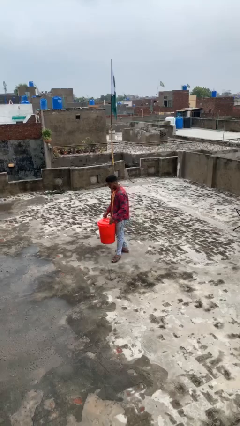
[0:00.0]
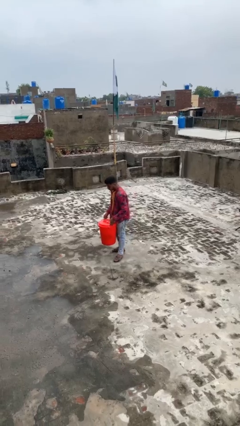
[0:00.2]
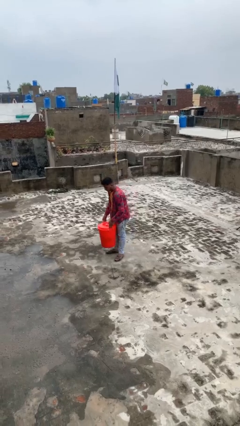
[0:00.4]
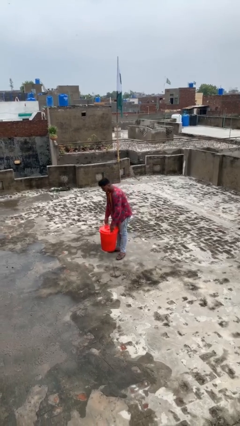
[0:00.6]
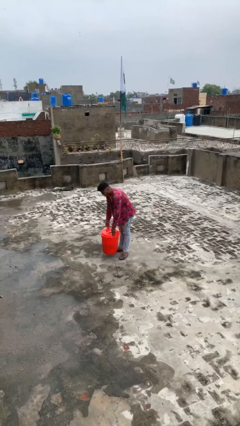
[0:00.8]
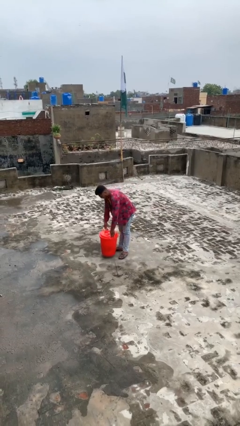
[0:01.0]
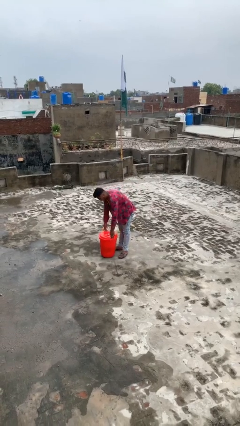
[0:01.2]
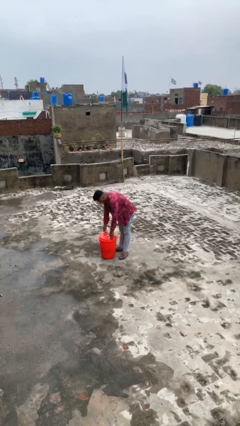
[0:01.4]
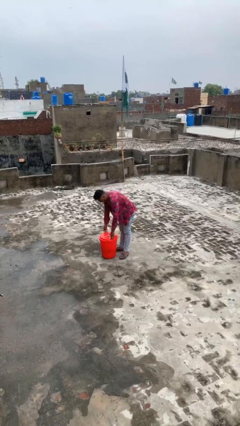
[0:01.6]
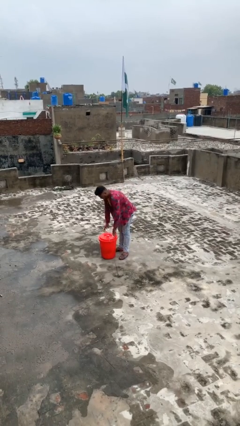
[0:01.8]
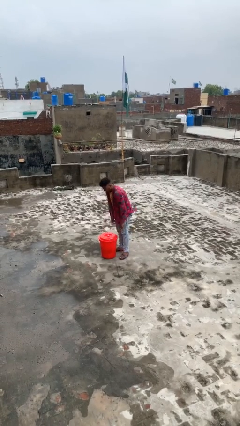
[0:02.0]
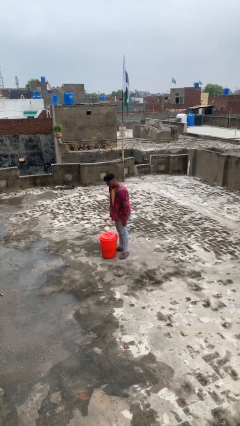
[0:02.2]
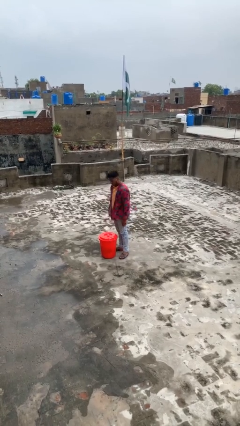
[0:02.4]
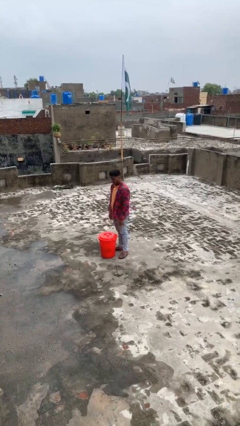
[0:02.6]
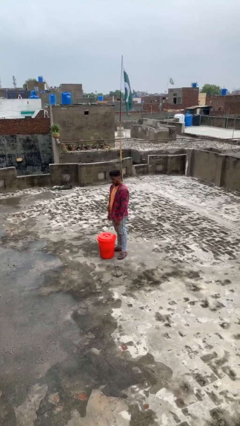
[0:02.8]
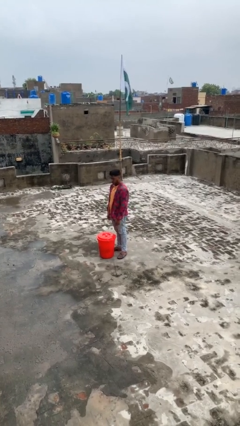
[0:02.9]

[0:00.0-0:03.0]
person puts down object on floor

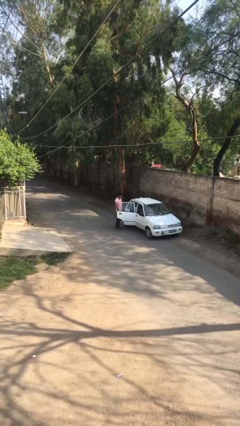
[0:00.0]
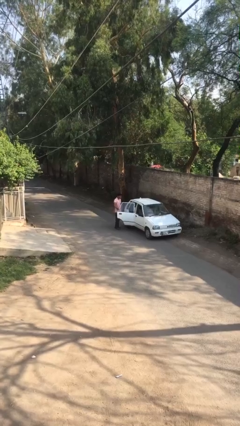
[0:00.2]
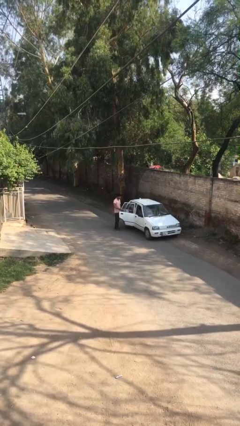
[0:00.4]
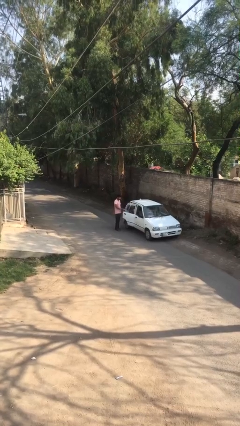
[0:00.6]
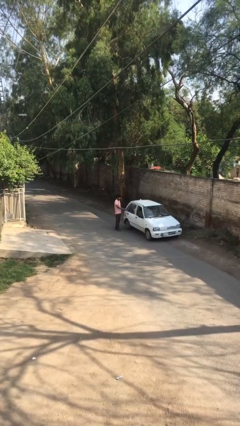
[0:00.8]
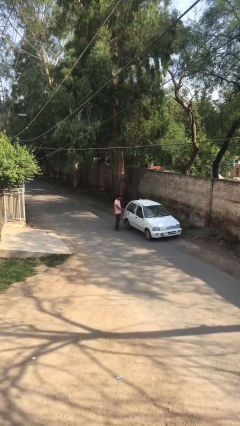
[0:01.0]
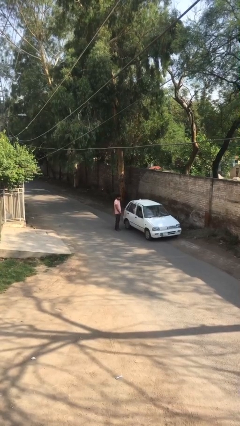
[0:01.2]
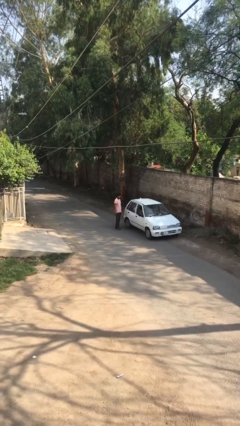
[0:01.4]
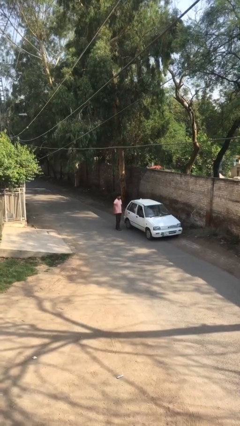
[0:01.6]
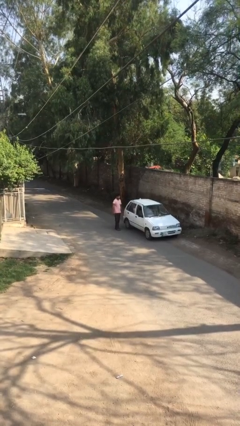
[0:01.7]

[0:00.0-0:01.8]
person closes car door

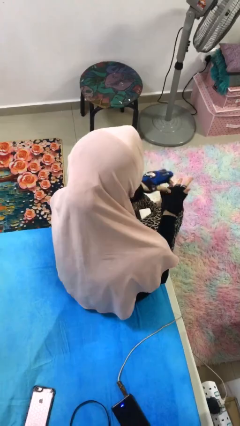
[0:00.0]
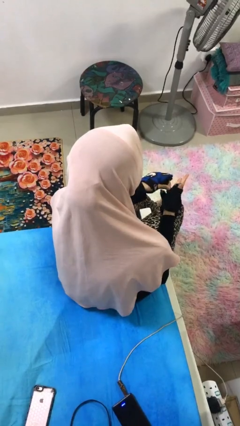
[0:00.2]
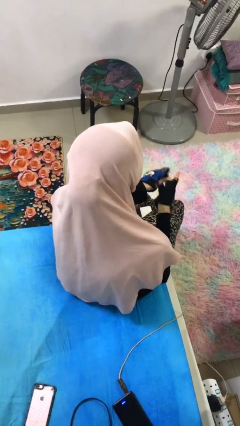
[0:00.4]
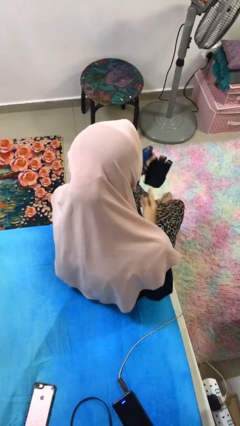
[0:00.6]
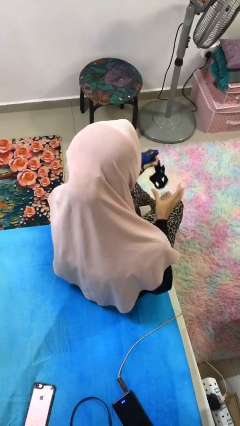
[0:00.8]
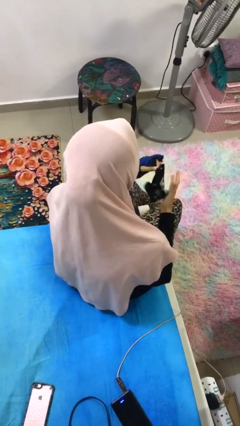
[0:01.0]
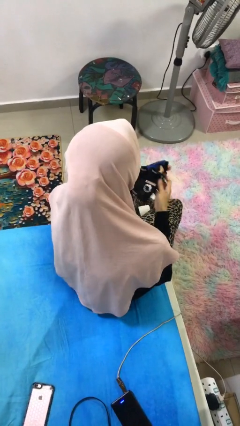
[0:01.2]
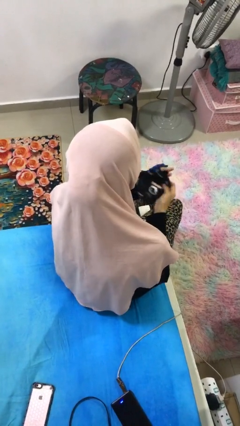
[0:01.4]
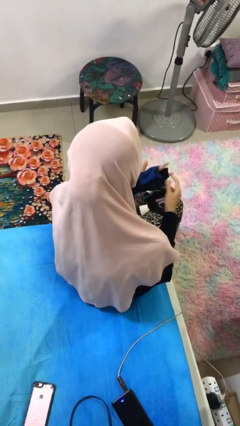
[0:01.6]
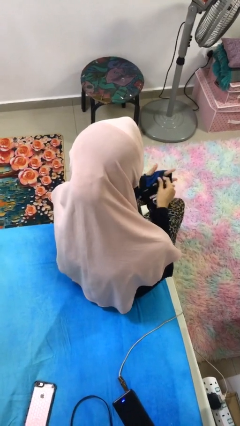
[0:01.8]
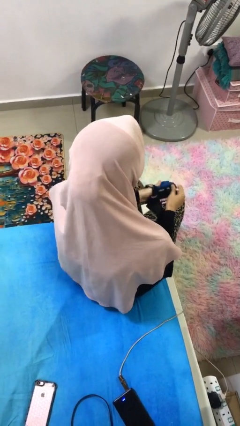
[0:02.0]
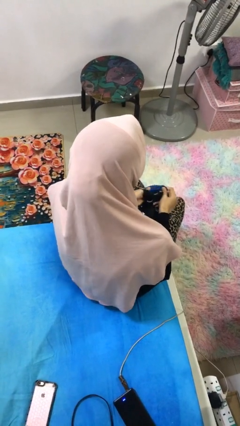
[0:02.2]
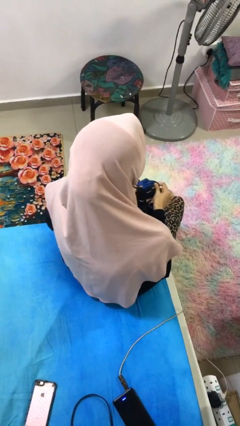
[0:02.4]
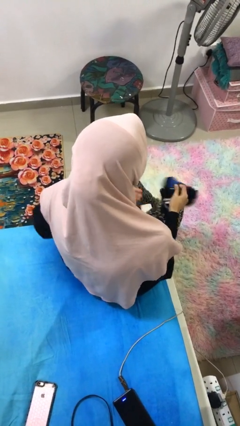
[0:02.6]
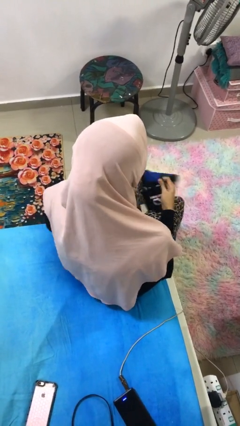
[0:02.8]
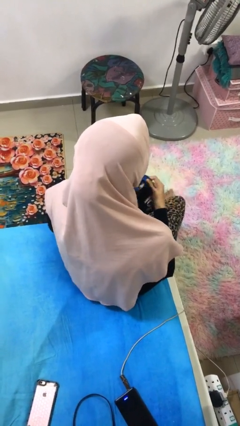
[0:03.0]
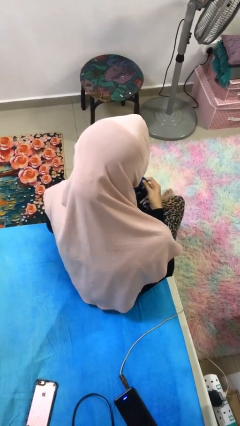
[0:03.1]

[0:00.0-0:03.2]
person takes off gloves

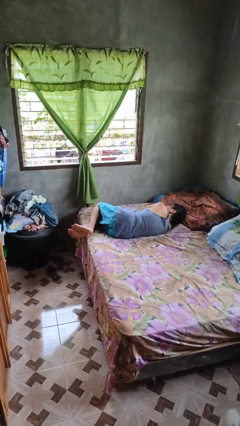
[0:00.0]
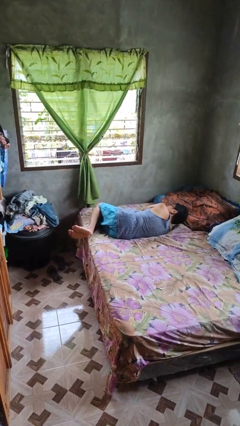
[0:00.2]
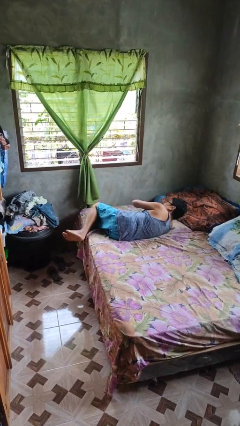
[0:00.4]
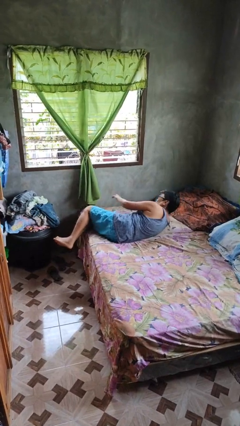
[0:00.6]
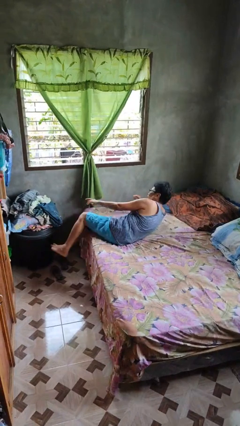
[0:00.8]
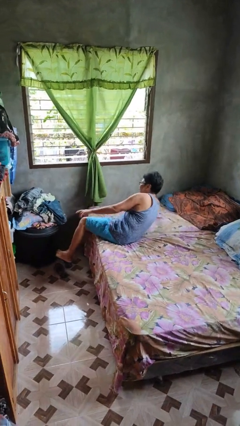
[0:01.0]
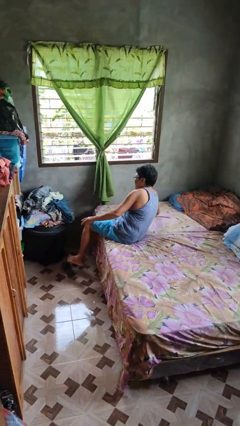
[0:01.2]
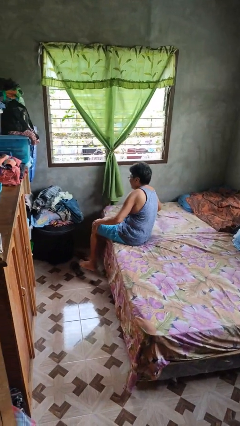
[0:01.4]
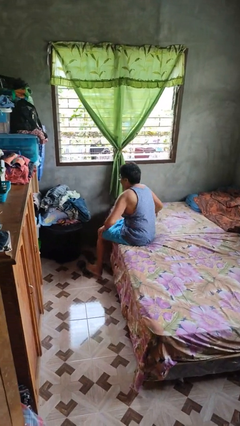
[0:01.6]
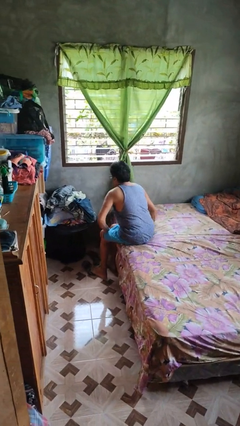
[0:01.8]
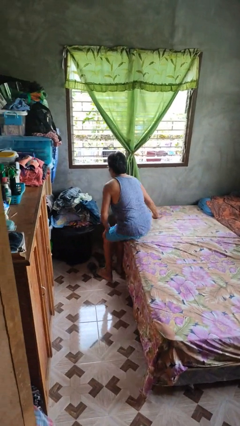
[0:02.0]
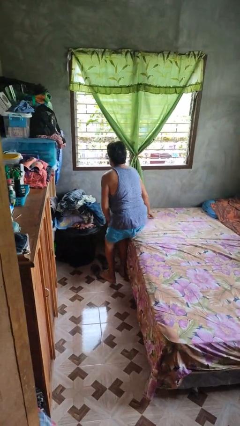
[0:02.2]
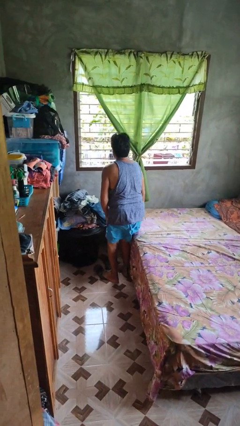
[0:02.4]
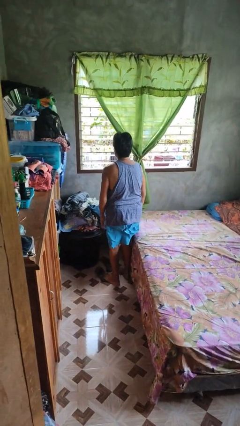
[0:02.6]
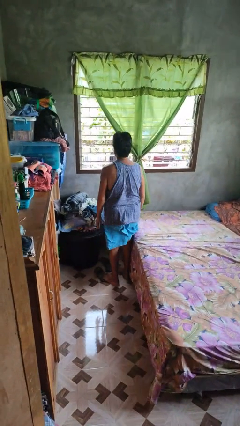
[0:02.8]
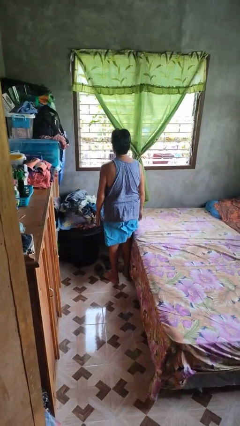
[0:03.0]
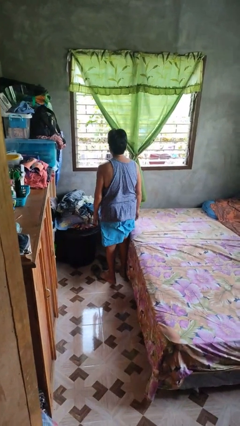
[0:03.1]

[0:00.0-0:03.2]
person stands up

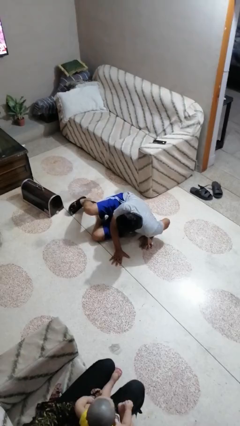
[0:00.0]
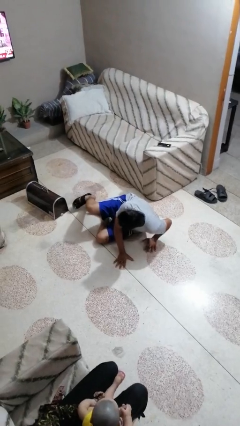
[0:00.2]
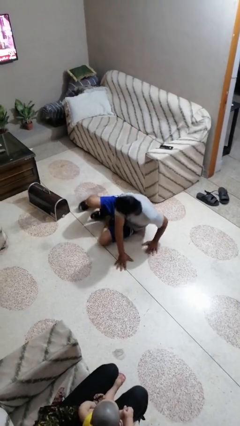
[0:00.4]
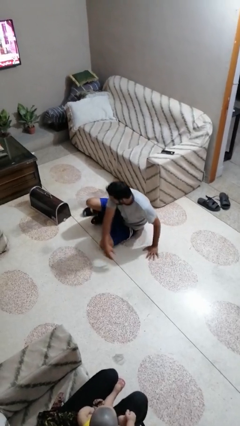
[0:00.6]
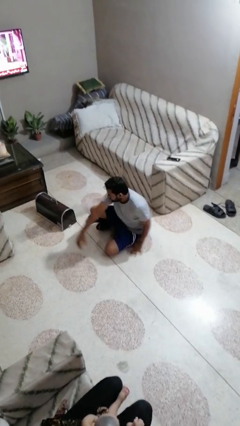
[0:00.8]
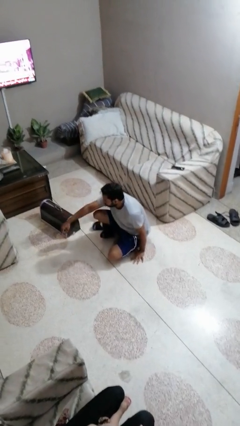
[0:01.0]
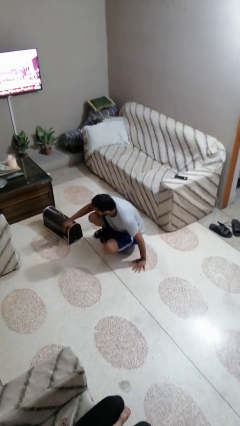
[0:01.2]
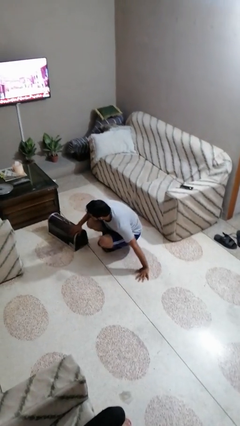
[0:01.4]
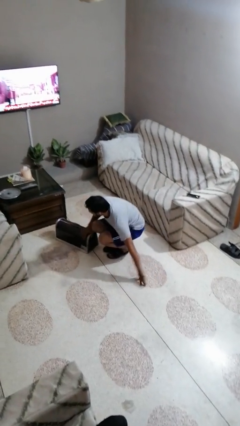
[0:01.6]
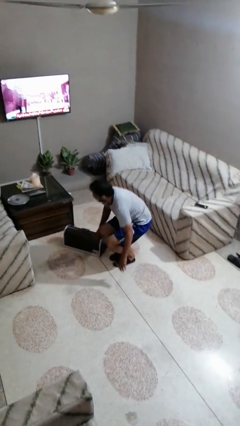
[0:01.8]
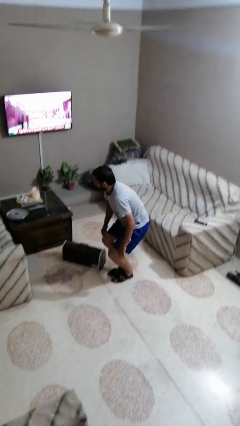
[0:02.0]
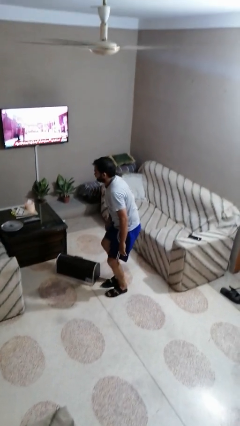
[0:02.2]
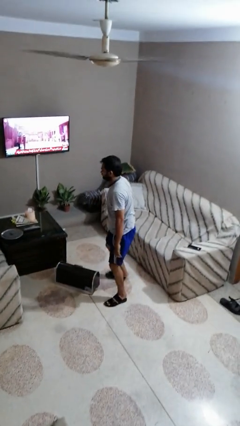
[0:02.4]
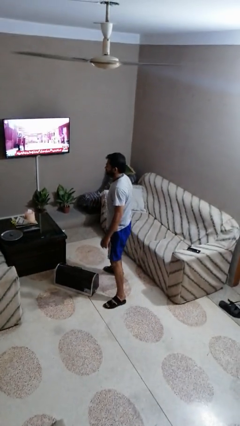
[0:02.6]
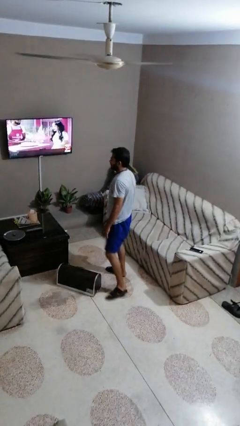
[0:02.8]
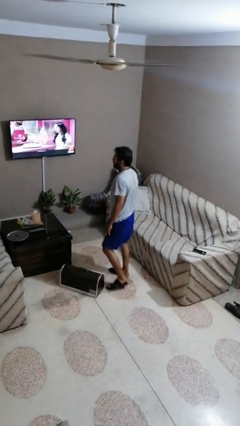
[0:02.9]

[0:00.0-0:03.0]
person stands up from floor

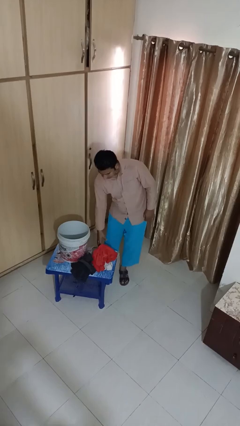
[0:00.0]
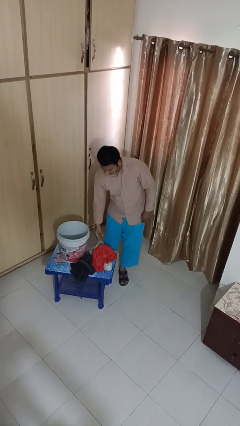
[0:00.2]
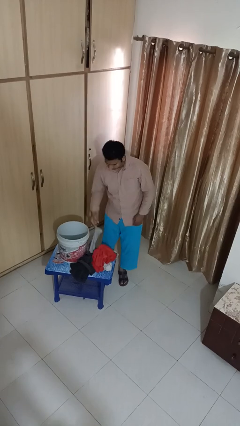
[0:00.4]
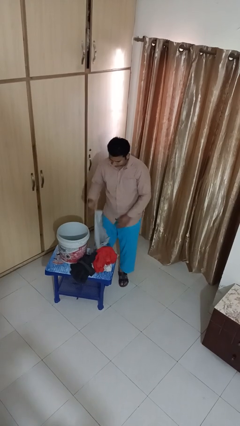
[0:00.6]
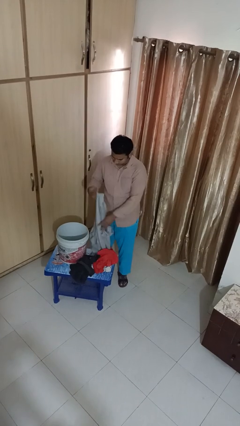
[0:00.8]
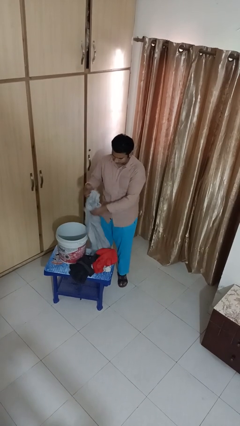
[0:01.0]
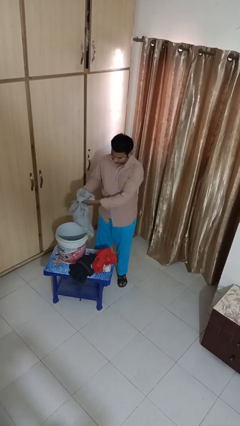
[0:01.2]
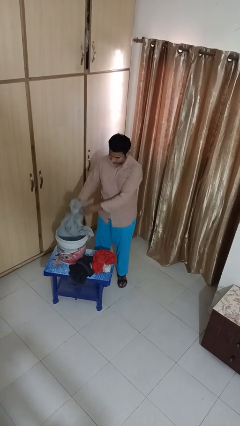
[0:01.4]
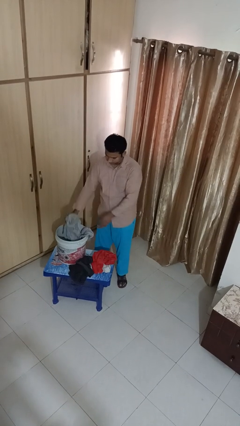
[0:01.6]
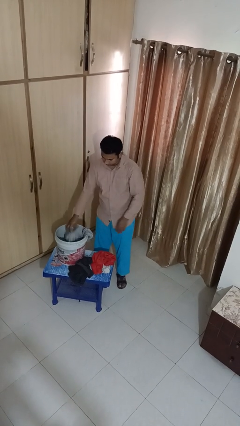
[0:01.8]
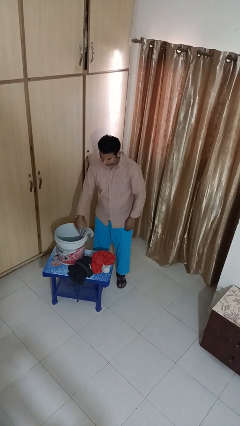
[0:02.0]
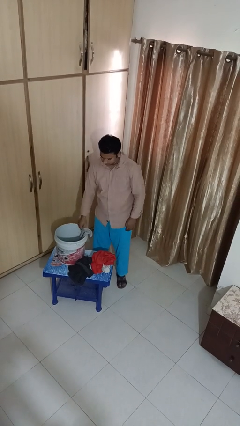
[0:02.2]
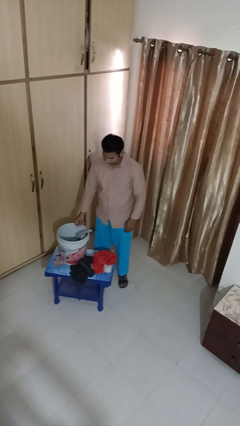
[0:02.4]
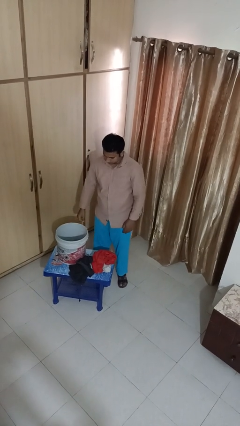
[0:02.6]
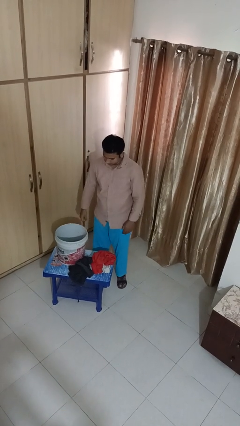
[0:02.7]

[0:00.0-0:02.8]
person puts object into basket

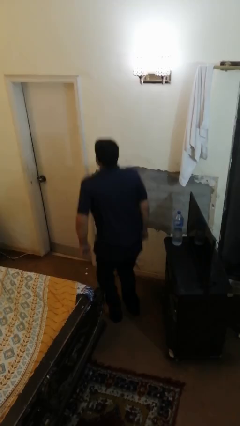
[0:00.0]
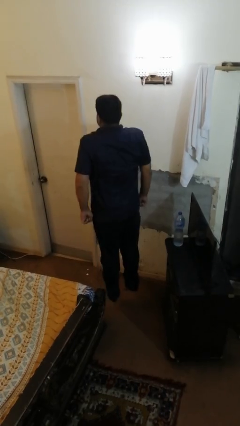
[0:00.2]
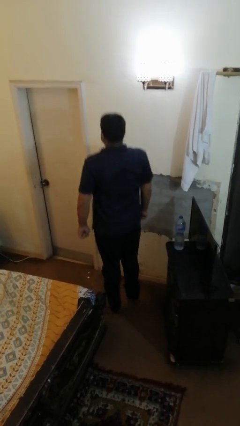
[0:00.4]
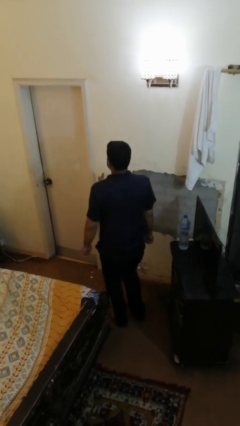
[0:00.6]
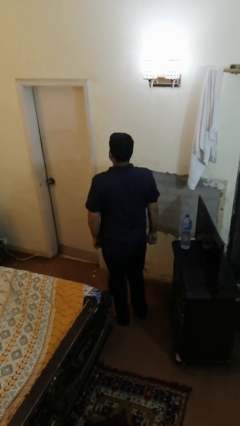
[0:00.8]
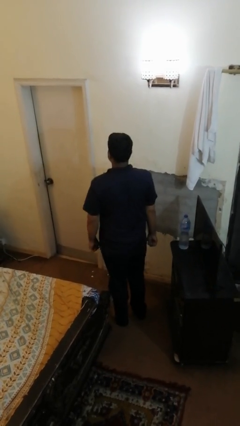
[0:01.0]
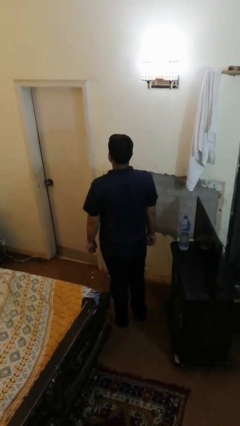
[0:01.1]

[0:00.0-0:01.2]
person jumps
